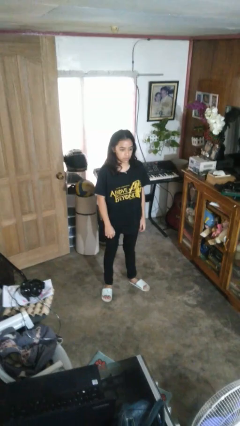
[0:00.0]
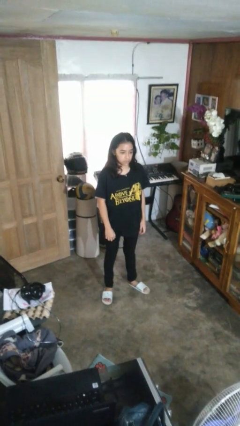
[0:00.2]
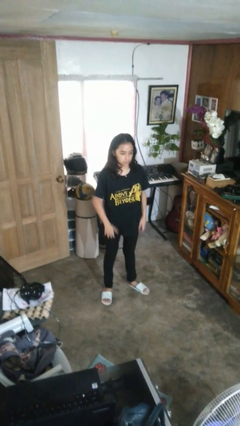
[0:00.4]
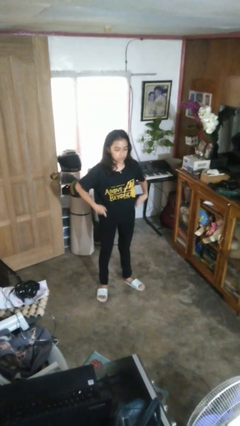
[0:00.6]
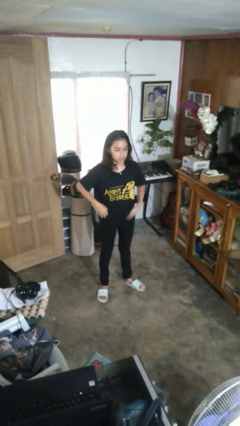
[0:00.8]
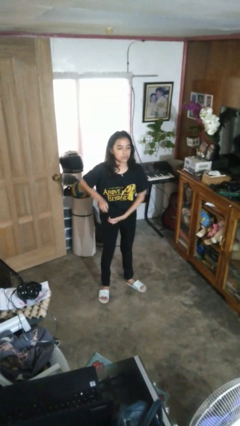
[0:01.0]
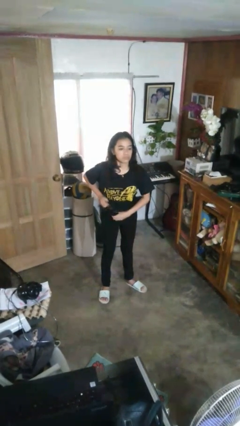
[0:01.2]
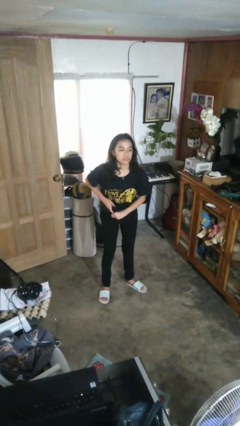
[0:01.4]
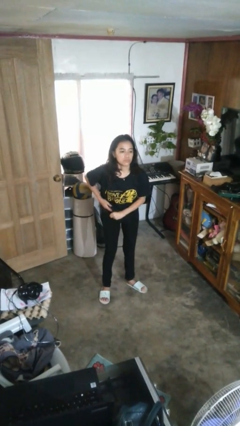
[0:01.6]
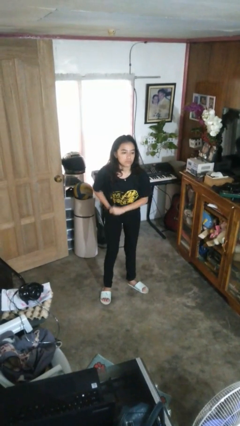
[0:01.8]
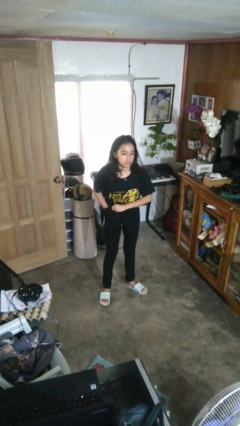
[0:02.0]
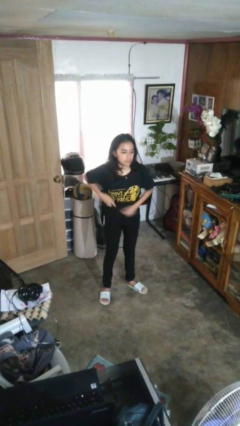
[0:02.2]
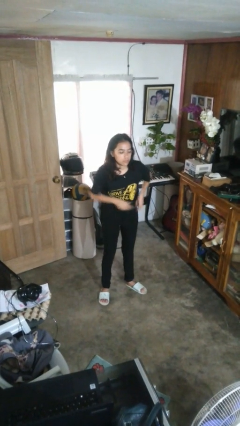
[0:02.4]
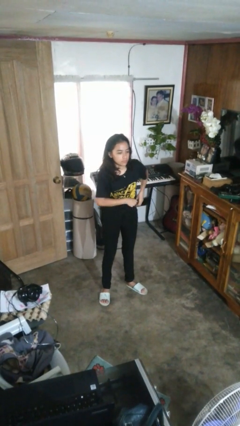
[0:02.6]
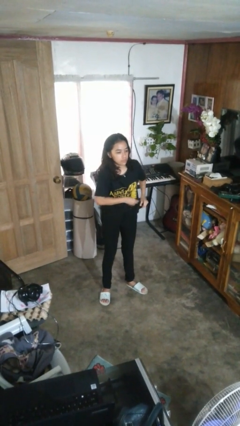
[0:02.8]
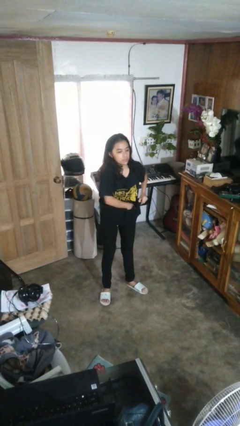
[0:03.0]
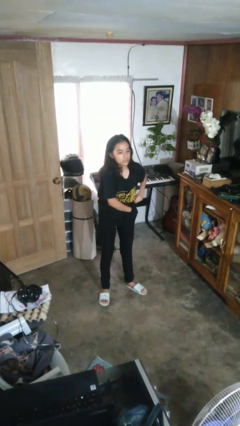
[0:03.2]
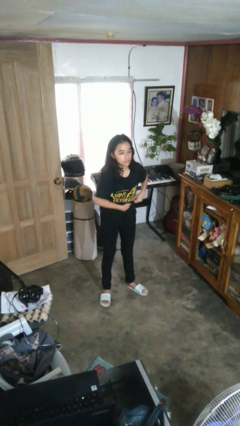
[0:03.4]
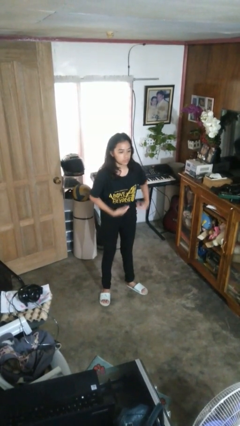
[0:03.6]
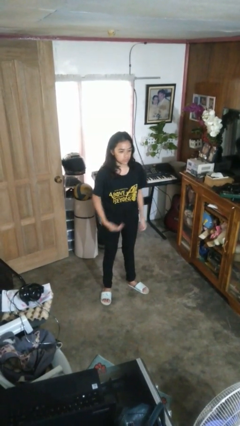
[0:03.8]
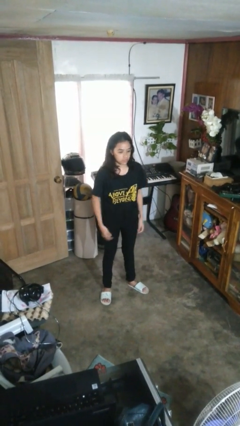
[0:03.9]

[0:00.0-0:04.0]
person tucks in shirt

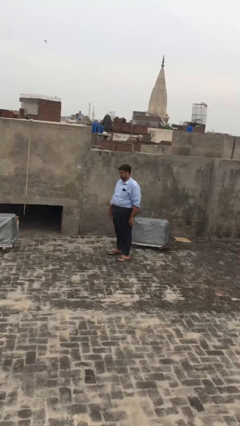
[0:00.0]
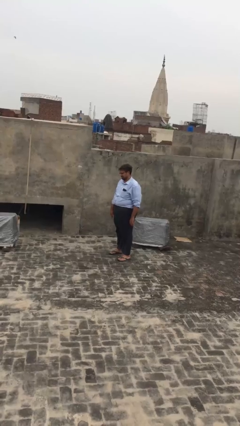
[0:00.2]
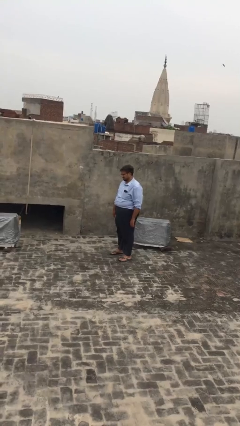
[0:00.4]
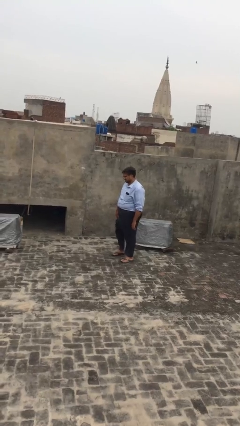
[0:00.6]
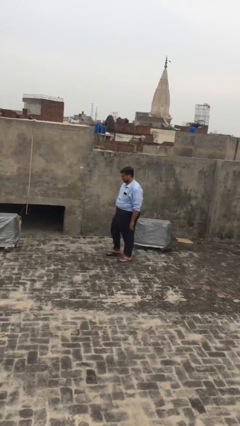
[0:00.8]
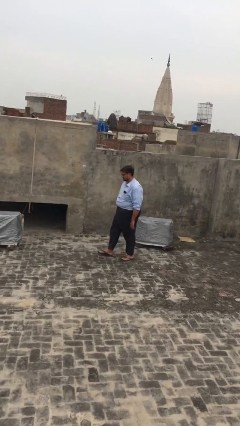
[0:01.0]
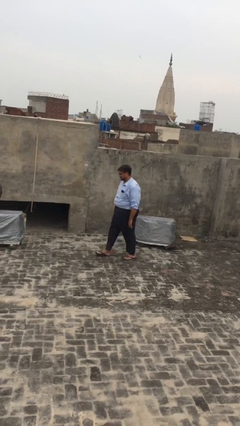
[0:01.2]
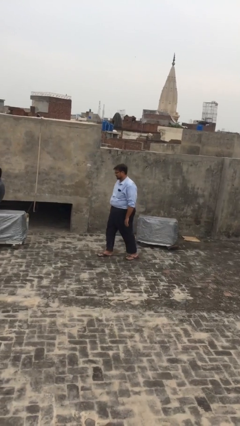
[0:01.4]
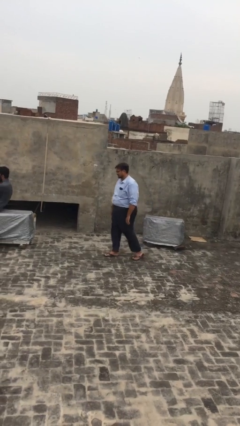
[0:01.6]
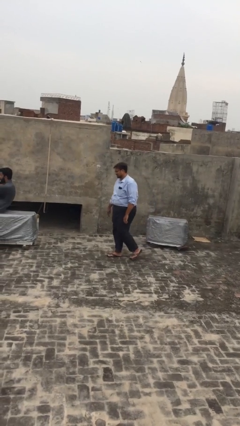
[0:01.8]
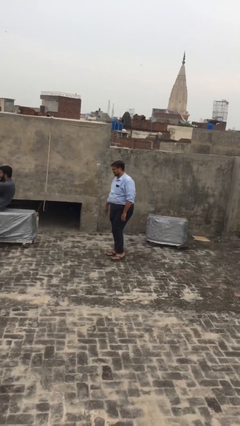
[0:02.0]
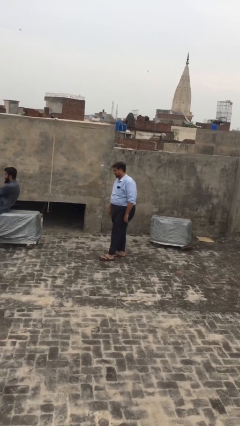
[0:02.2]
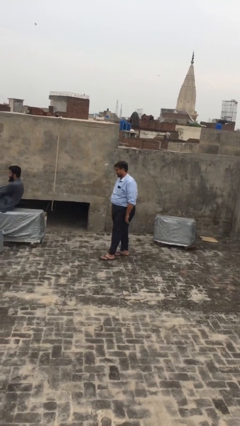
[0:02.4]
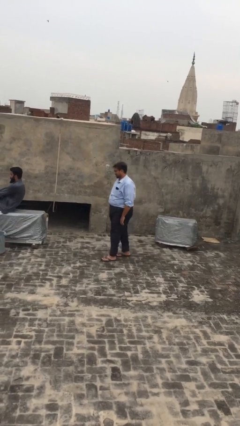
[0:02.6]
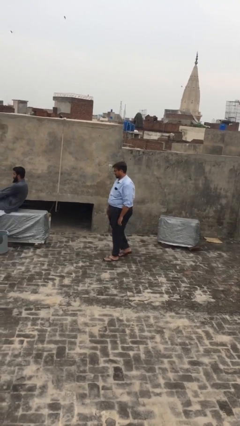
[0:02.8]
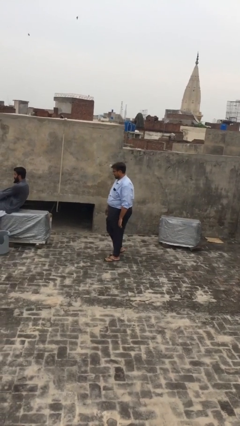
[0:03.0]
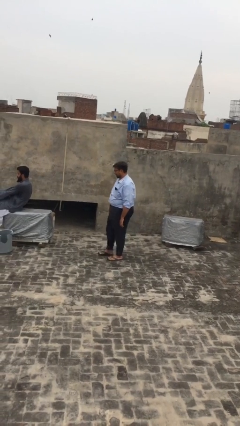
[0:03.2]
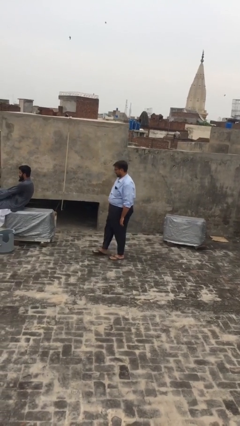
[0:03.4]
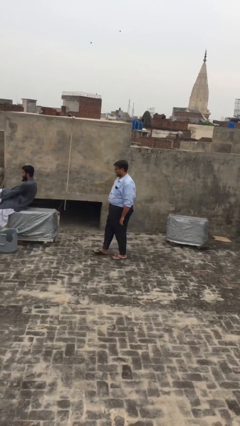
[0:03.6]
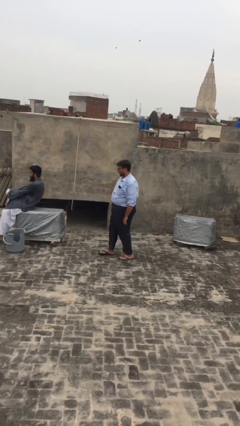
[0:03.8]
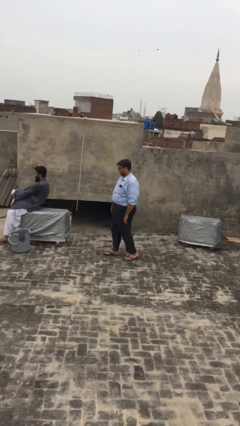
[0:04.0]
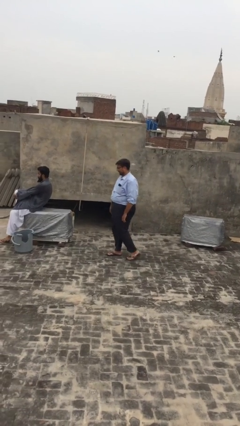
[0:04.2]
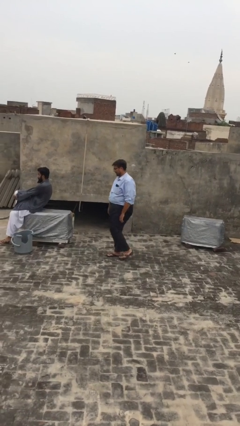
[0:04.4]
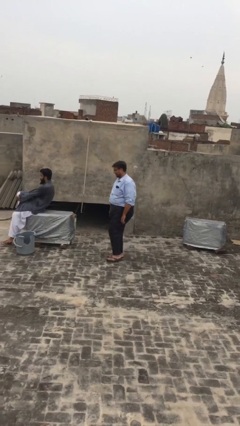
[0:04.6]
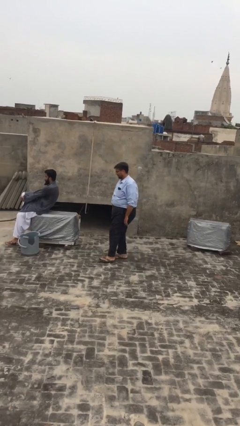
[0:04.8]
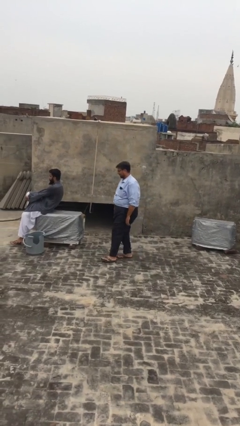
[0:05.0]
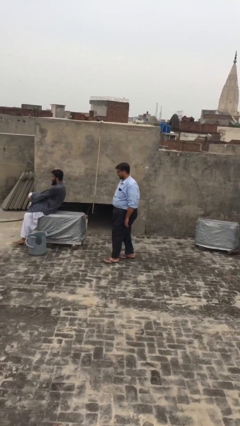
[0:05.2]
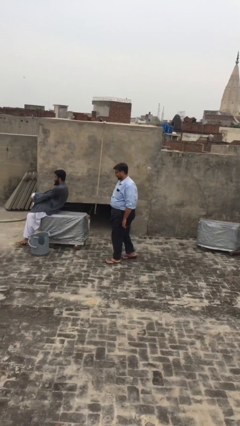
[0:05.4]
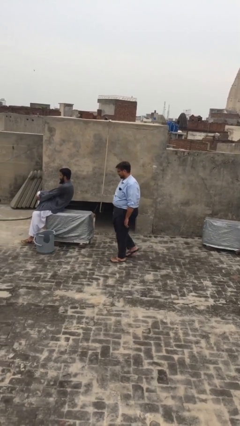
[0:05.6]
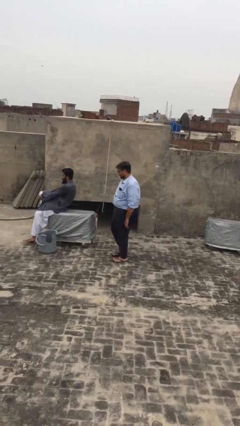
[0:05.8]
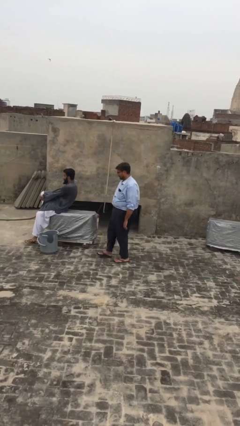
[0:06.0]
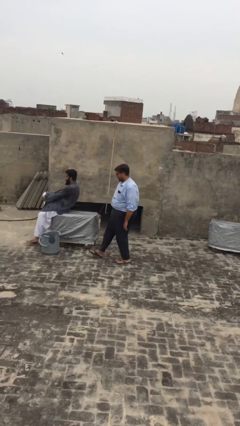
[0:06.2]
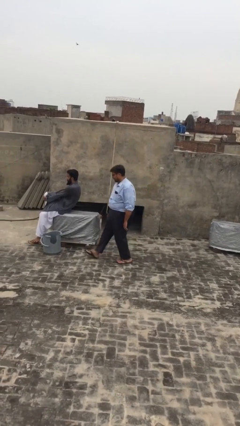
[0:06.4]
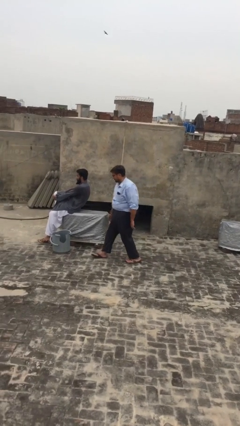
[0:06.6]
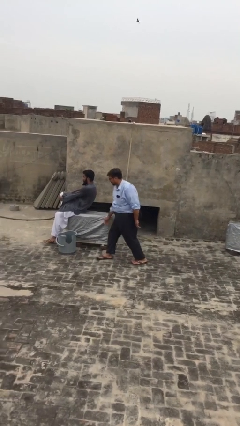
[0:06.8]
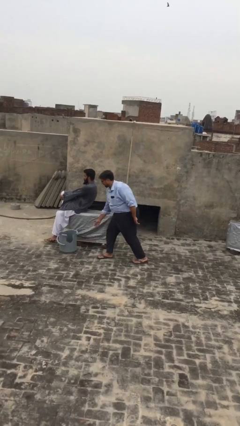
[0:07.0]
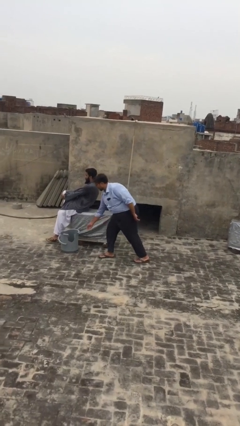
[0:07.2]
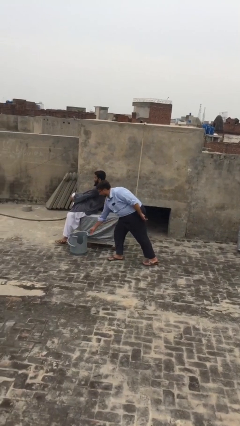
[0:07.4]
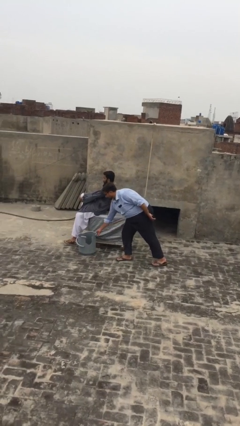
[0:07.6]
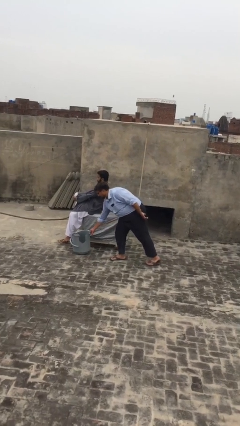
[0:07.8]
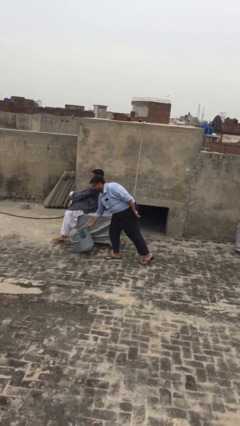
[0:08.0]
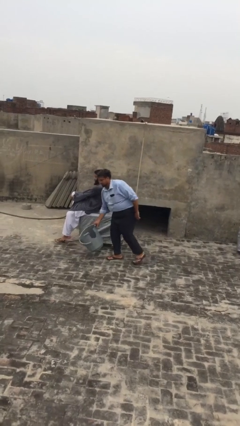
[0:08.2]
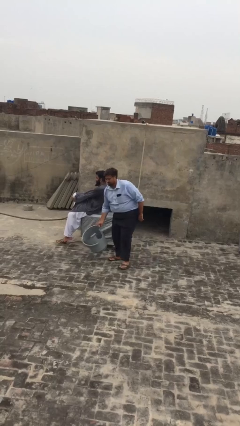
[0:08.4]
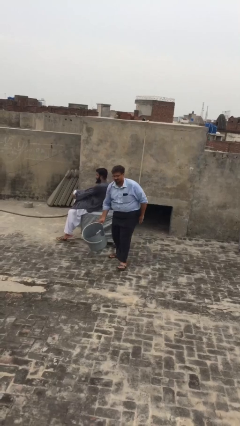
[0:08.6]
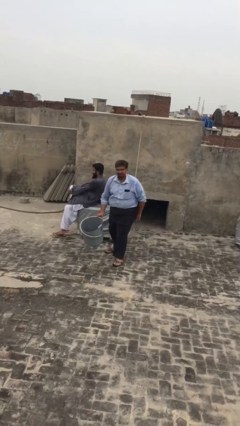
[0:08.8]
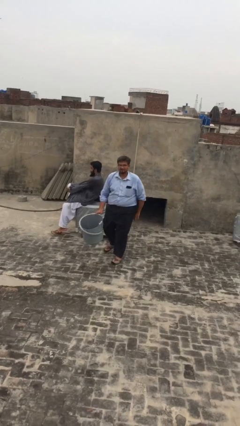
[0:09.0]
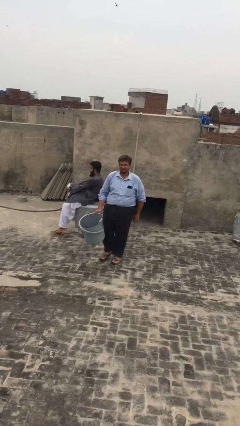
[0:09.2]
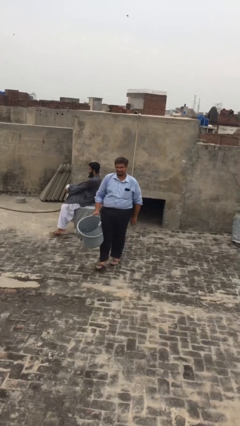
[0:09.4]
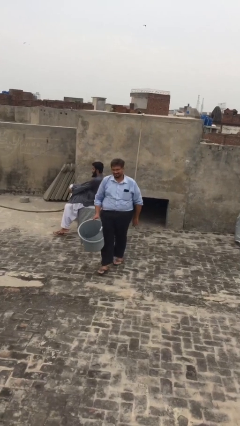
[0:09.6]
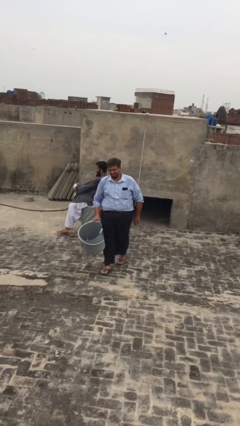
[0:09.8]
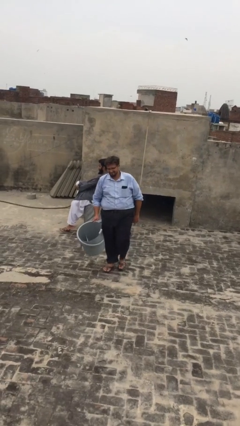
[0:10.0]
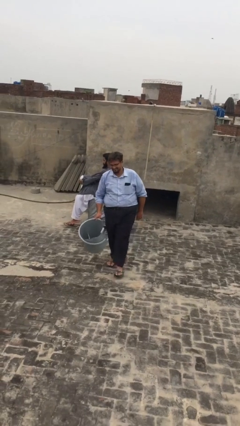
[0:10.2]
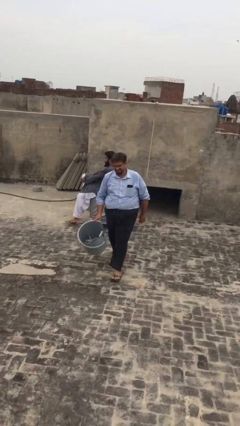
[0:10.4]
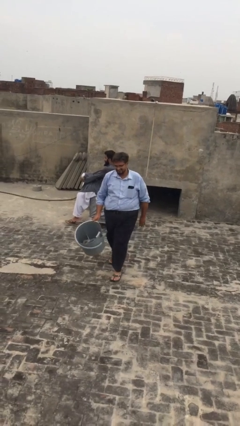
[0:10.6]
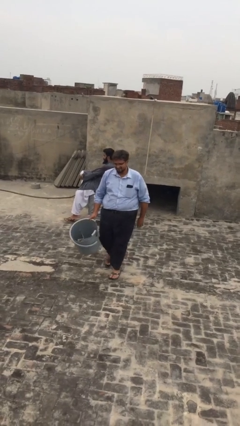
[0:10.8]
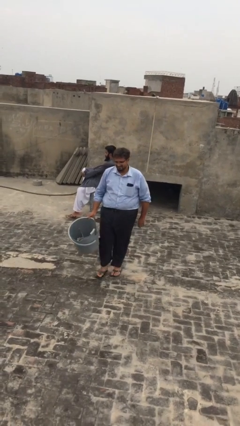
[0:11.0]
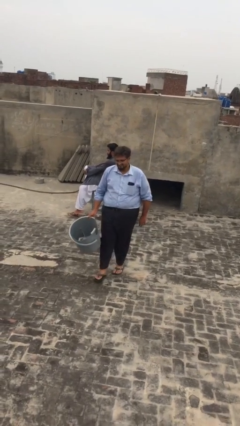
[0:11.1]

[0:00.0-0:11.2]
person steals object from person

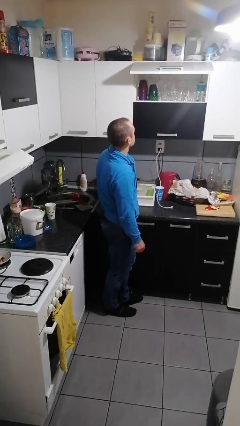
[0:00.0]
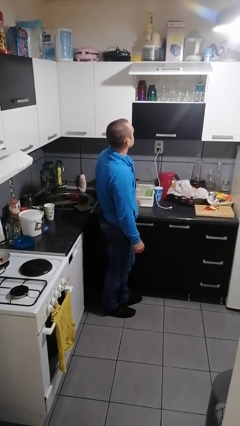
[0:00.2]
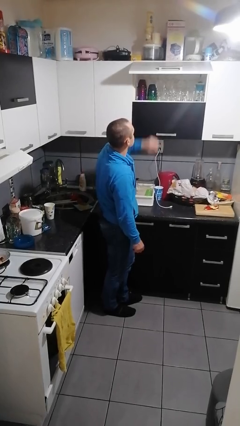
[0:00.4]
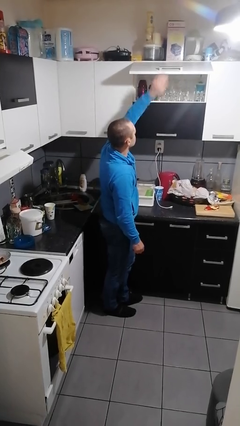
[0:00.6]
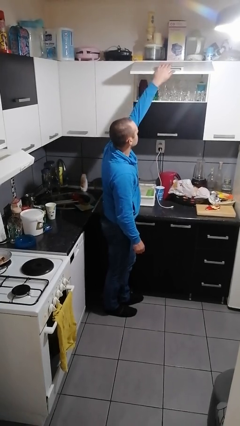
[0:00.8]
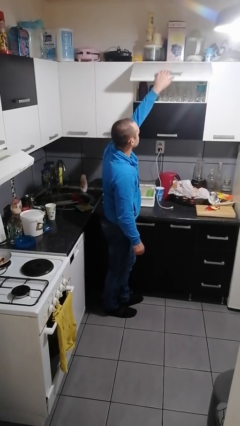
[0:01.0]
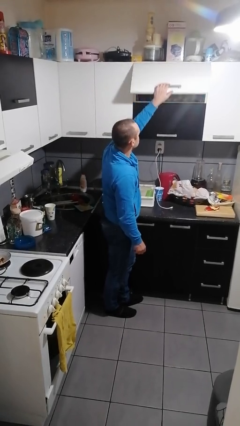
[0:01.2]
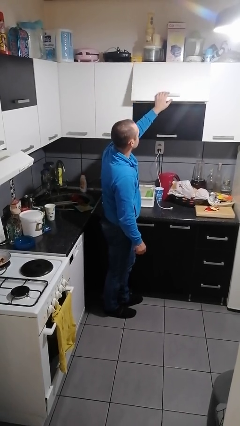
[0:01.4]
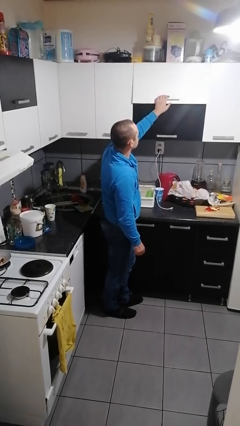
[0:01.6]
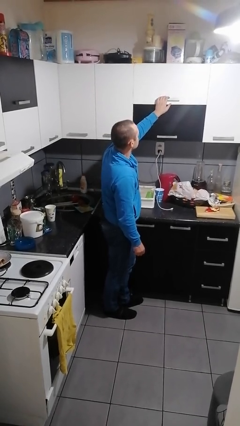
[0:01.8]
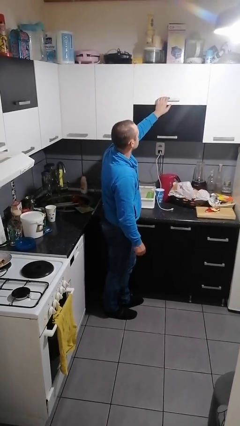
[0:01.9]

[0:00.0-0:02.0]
person closes cabinet

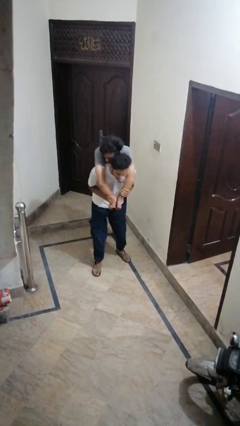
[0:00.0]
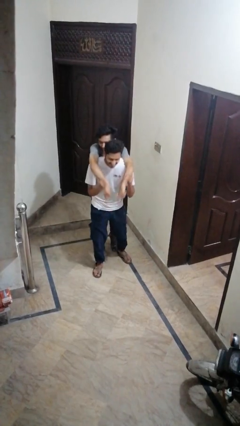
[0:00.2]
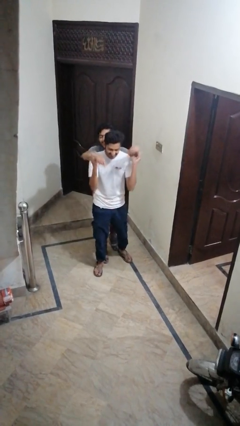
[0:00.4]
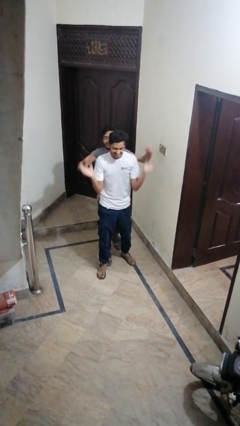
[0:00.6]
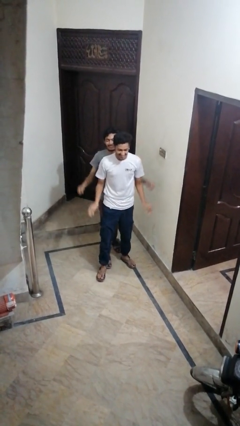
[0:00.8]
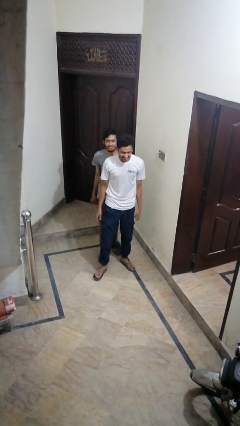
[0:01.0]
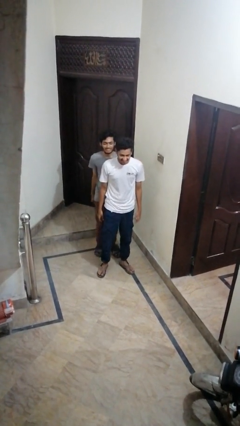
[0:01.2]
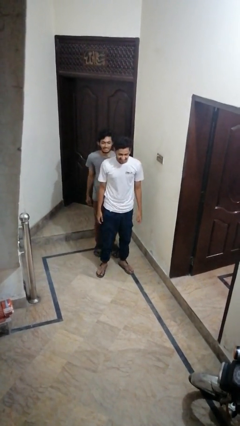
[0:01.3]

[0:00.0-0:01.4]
person puts down person
